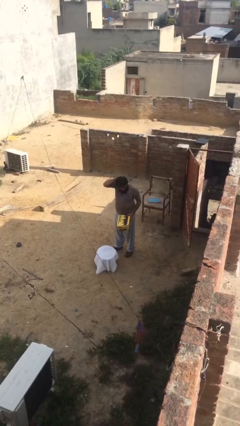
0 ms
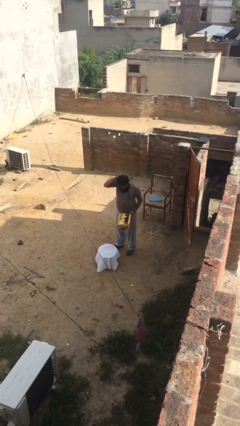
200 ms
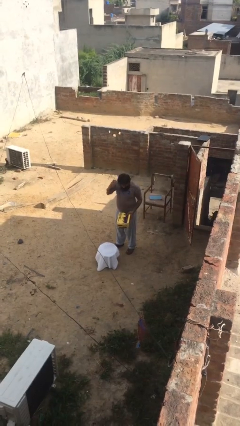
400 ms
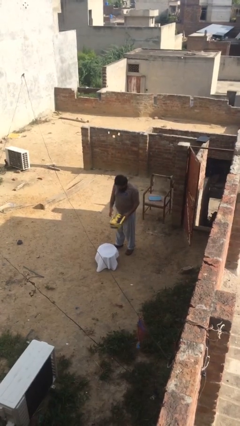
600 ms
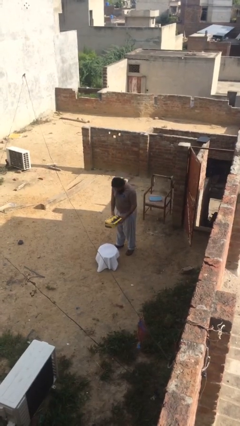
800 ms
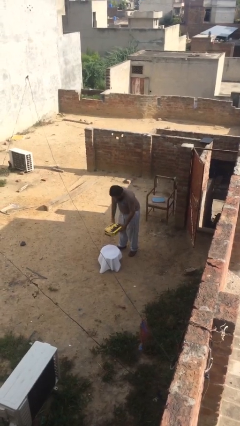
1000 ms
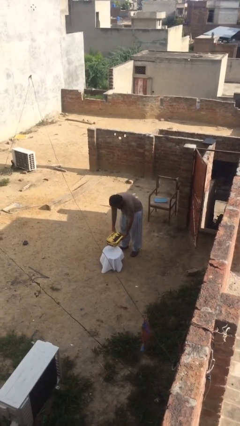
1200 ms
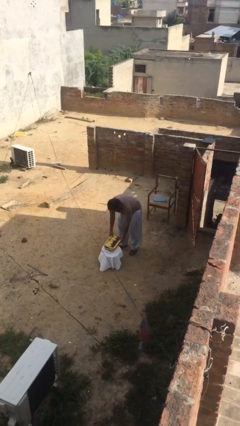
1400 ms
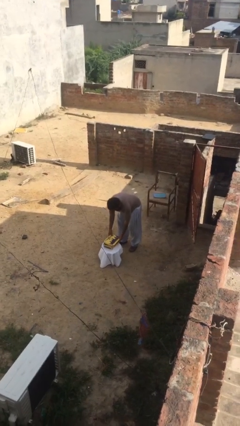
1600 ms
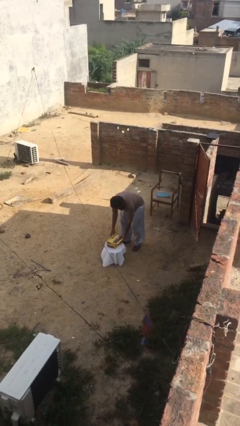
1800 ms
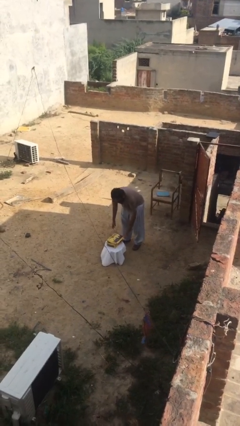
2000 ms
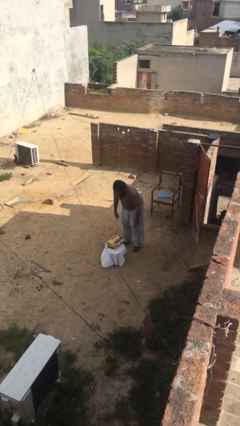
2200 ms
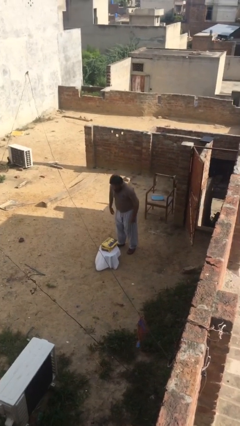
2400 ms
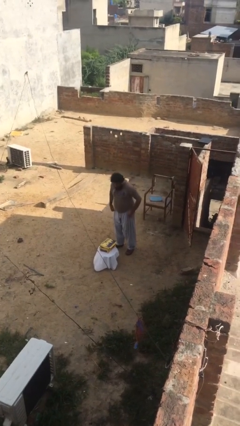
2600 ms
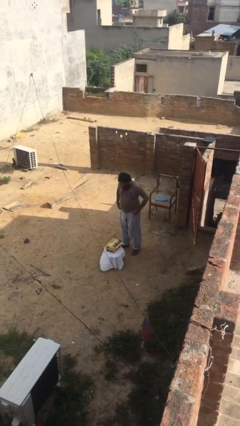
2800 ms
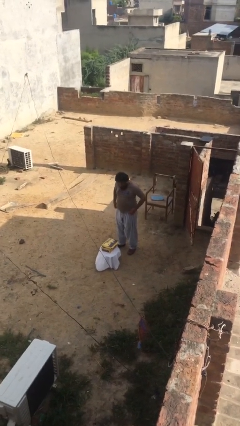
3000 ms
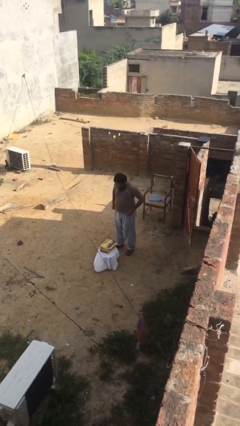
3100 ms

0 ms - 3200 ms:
person puts down object on table

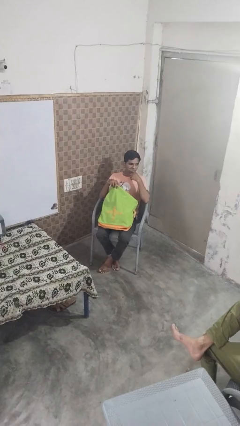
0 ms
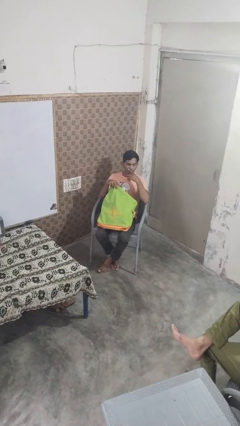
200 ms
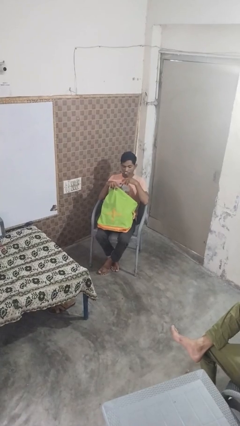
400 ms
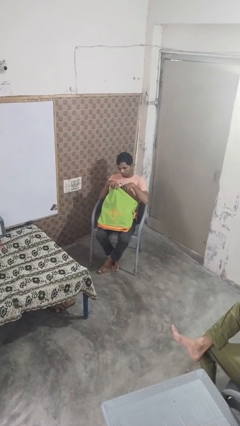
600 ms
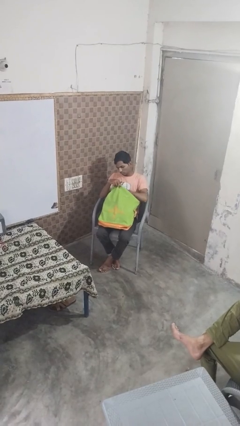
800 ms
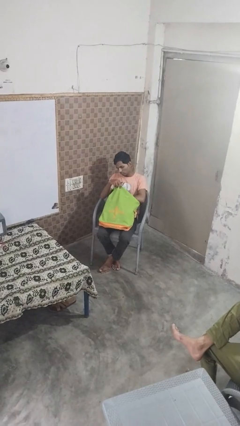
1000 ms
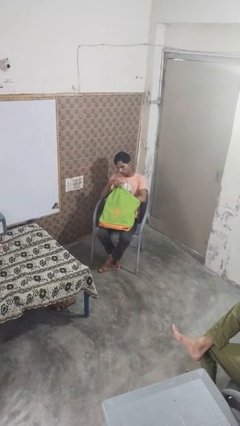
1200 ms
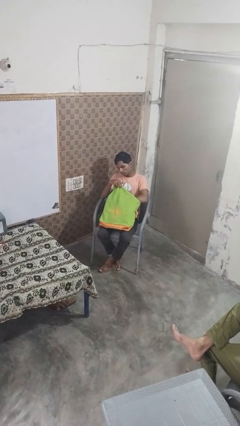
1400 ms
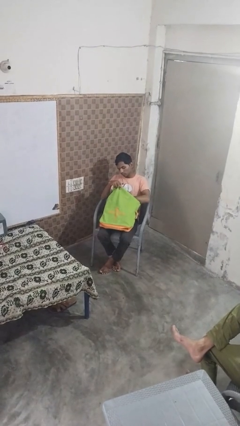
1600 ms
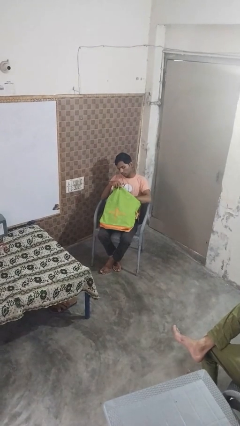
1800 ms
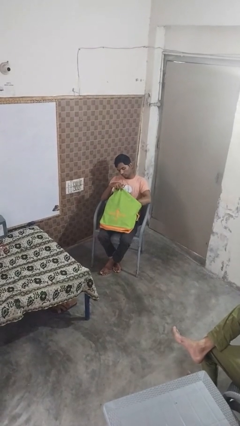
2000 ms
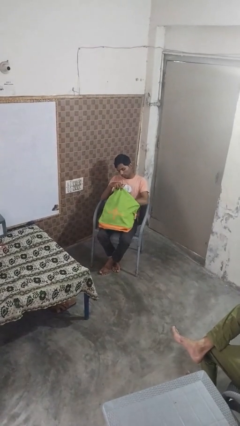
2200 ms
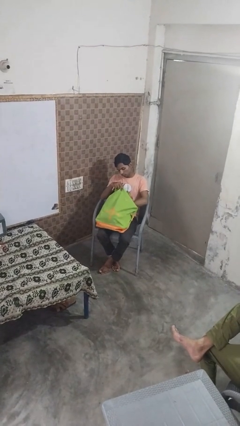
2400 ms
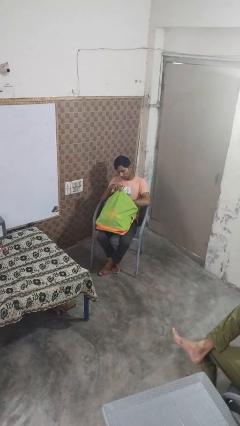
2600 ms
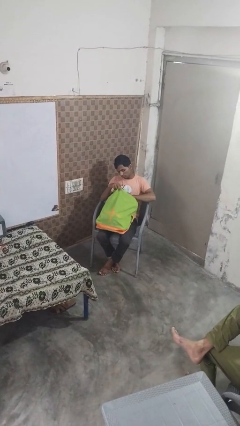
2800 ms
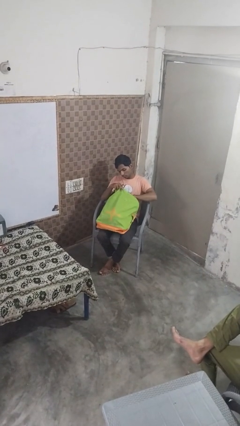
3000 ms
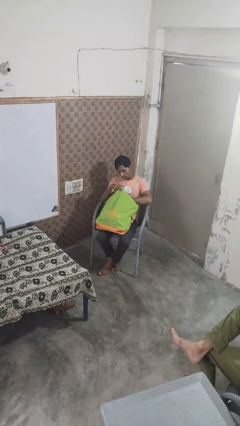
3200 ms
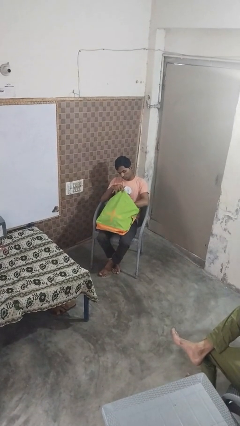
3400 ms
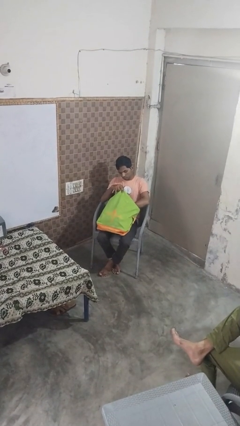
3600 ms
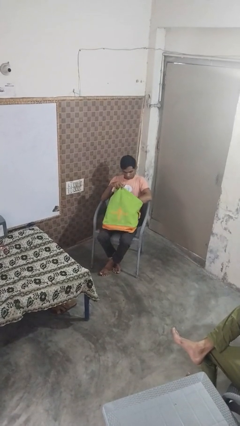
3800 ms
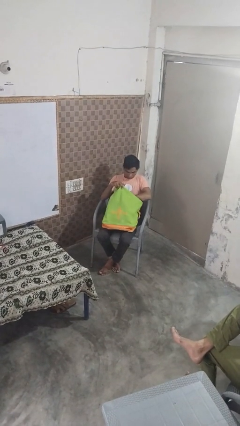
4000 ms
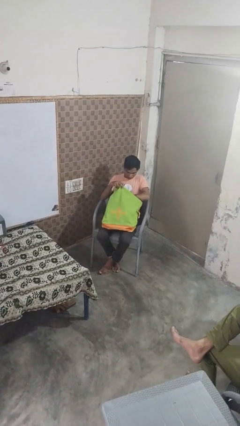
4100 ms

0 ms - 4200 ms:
person searches in bag

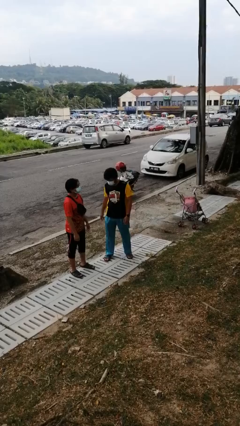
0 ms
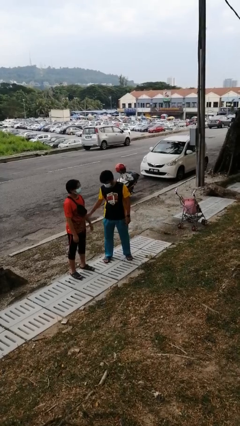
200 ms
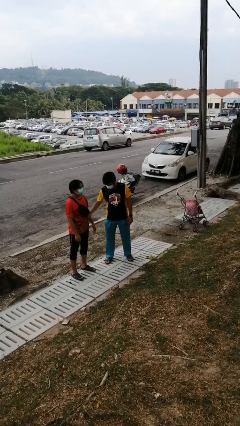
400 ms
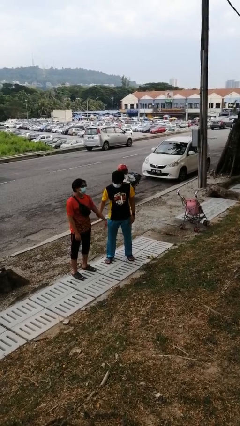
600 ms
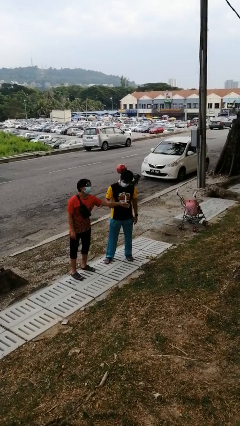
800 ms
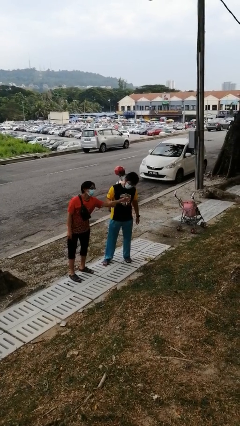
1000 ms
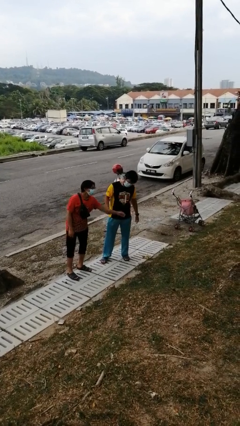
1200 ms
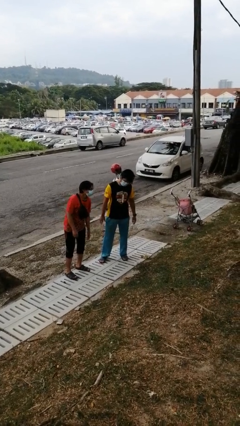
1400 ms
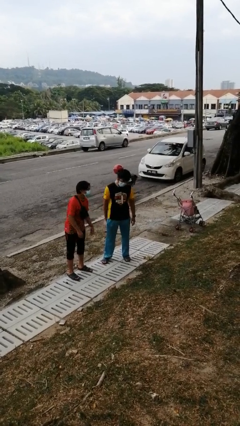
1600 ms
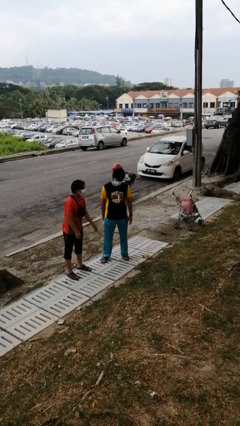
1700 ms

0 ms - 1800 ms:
person grabs person by forearm

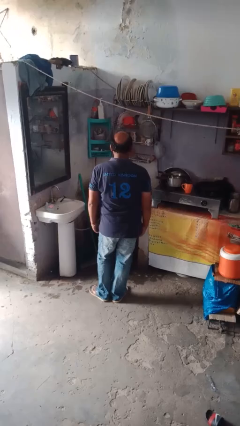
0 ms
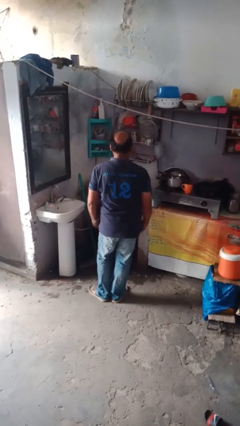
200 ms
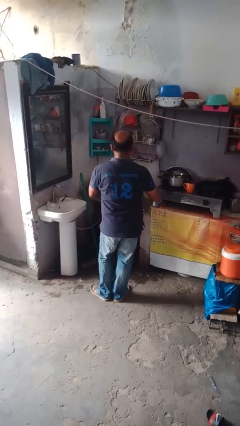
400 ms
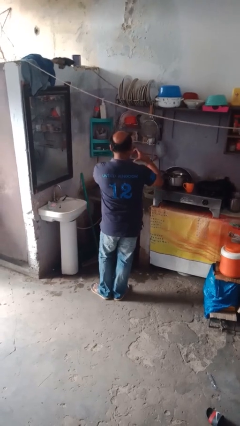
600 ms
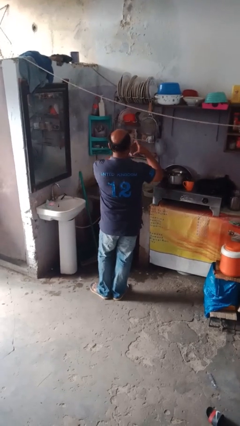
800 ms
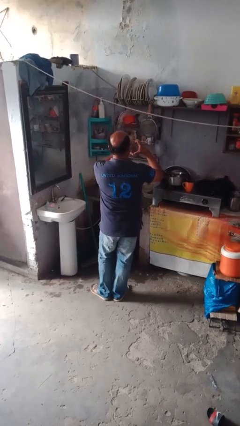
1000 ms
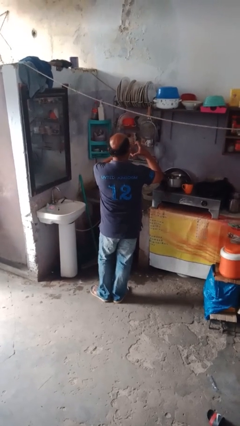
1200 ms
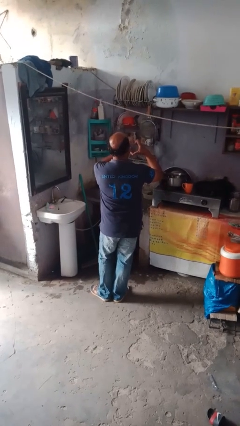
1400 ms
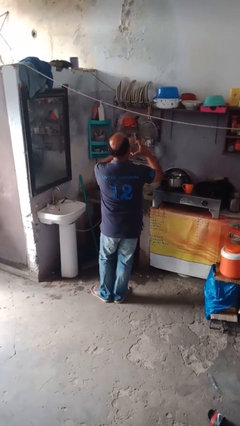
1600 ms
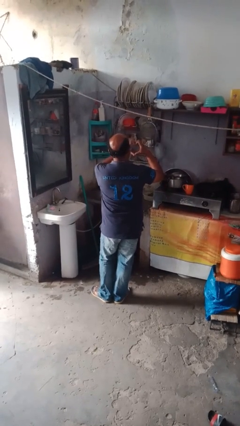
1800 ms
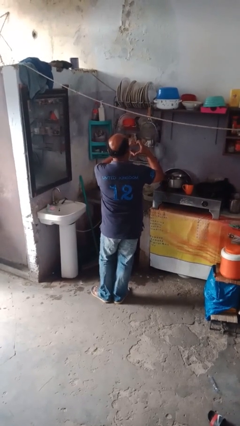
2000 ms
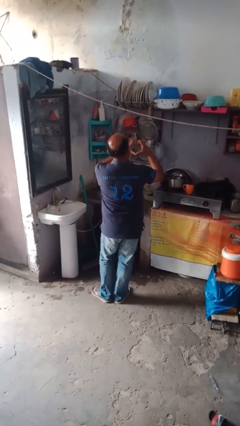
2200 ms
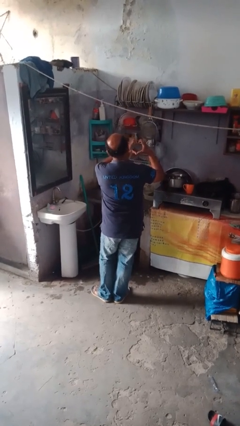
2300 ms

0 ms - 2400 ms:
person gestures heart

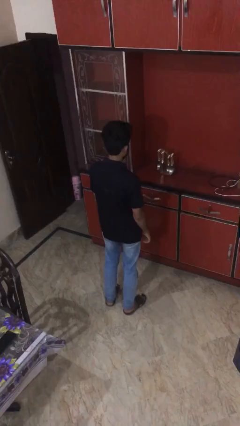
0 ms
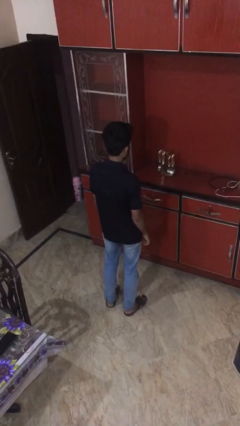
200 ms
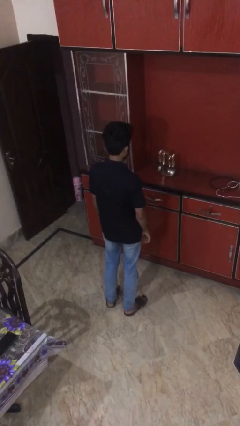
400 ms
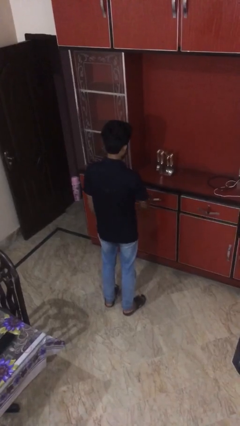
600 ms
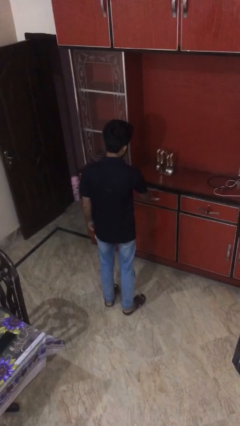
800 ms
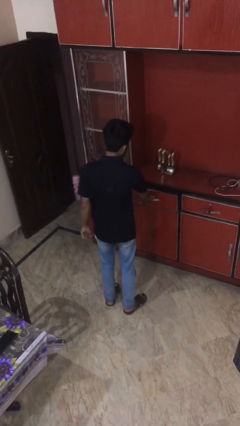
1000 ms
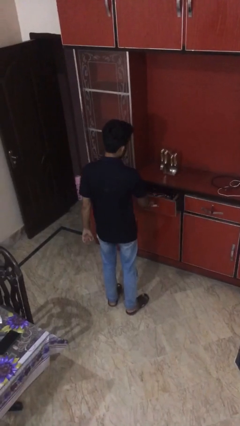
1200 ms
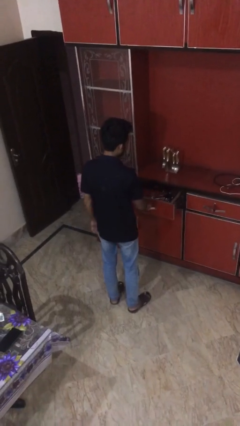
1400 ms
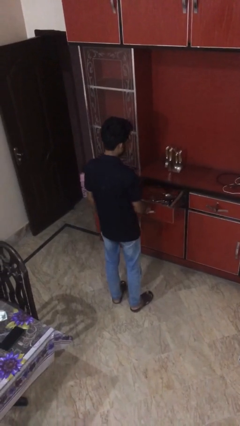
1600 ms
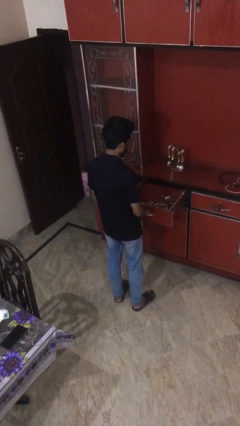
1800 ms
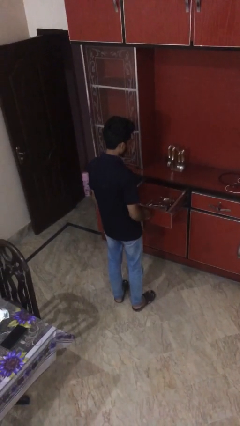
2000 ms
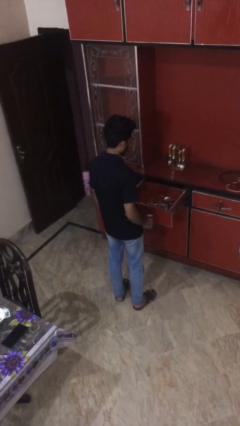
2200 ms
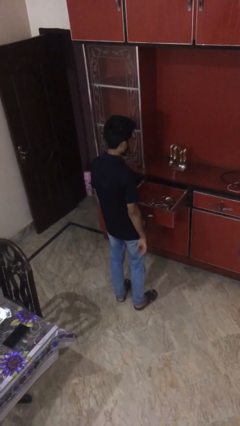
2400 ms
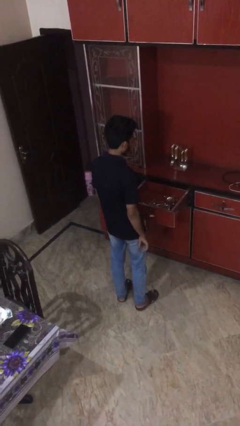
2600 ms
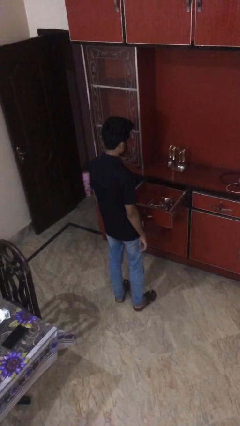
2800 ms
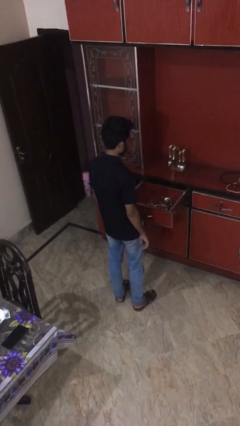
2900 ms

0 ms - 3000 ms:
person opens kitchen drawer

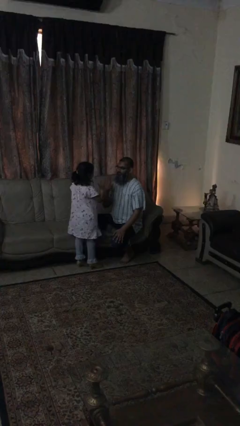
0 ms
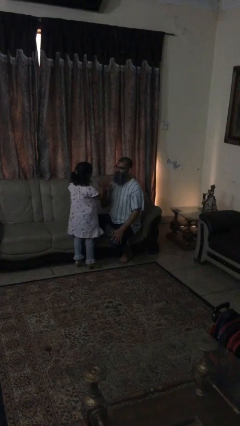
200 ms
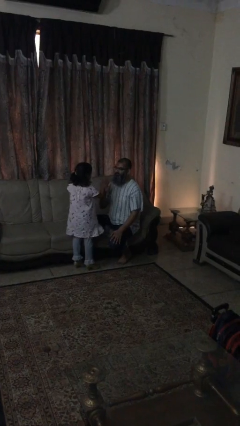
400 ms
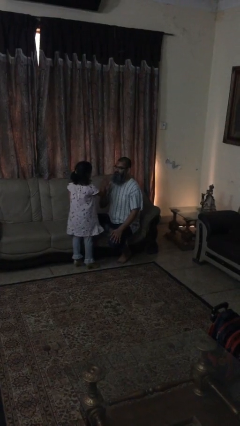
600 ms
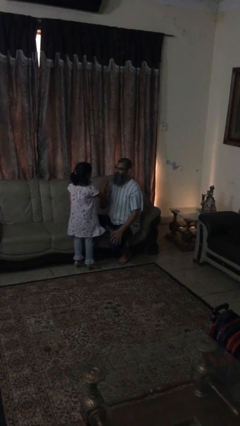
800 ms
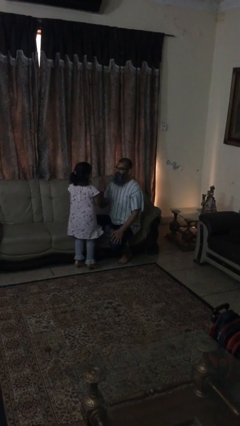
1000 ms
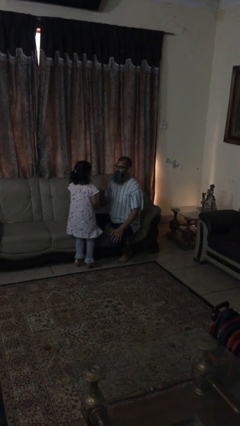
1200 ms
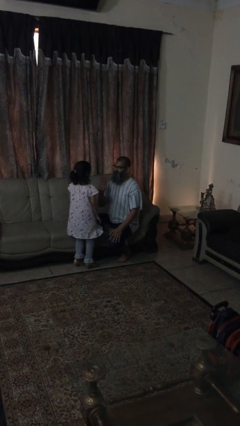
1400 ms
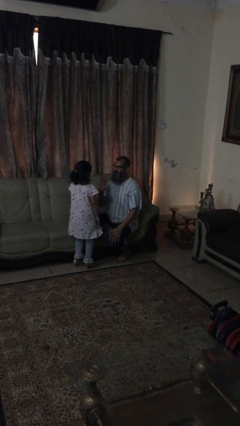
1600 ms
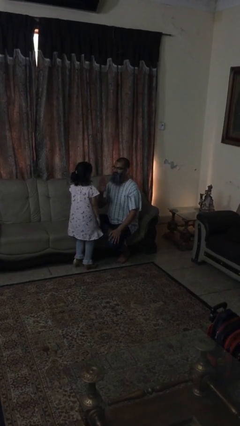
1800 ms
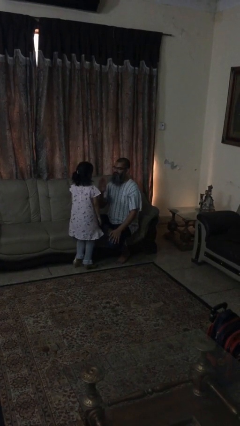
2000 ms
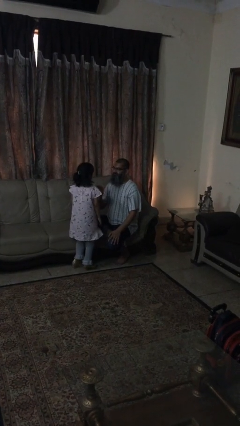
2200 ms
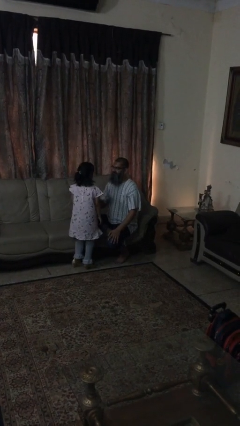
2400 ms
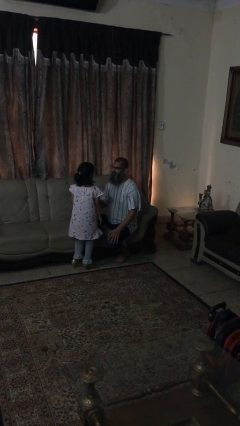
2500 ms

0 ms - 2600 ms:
person highfives hand

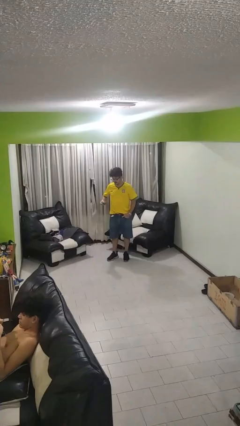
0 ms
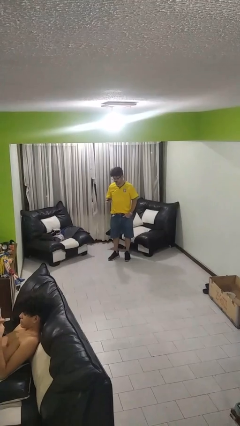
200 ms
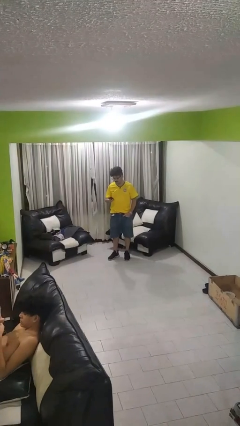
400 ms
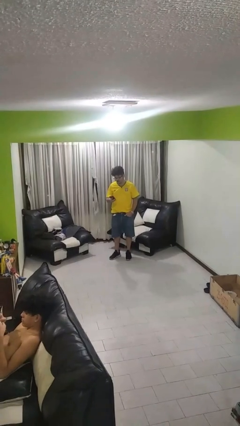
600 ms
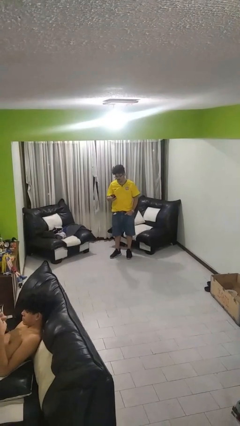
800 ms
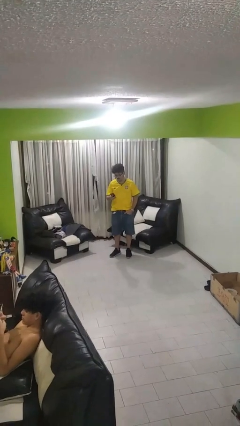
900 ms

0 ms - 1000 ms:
person takes phone from pocket
